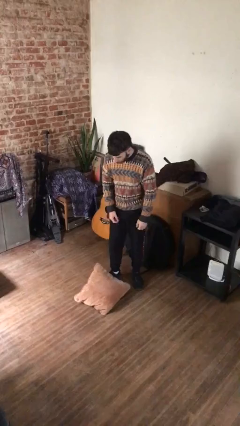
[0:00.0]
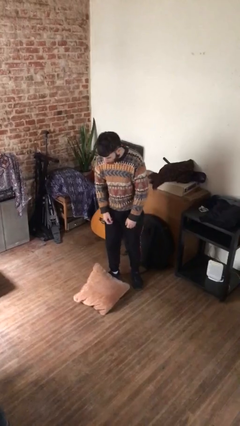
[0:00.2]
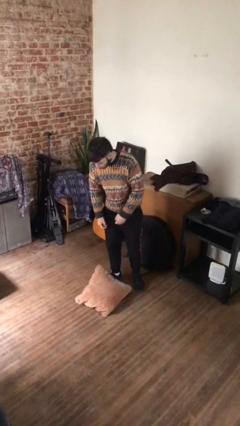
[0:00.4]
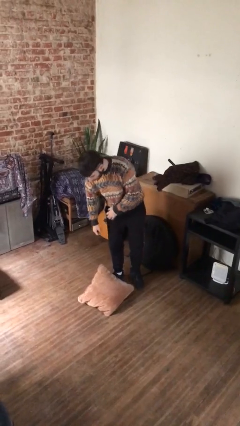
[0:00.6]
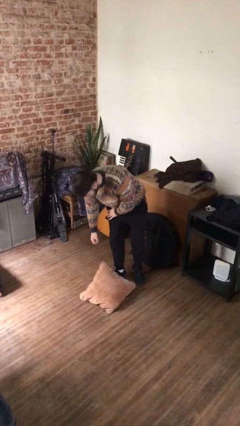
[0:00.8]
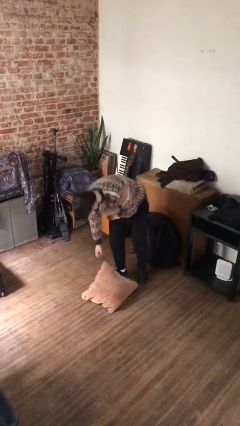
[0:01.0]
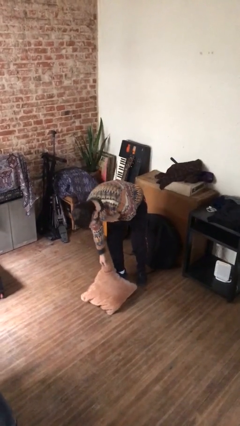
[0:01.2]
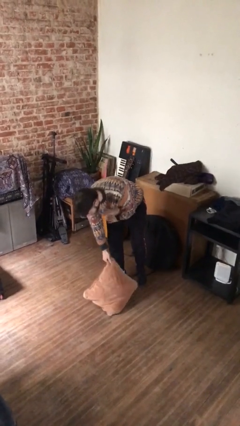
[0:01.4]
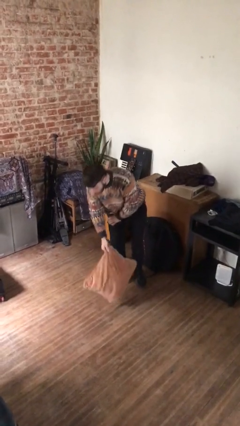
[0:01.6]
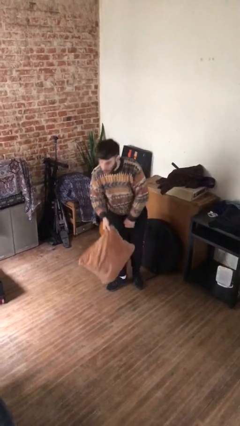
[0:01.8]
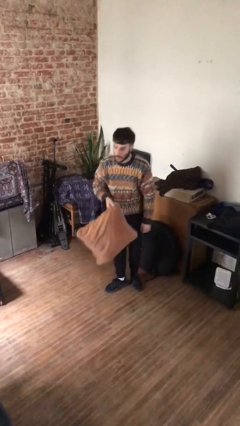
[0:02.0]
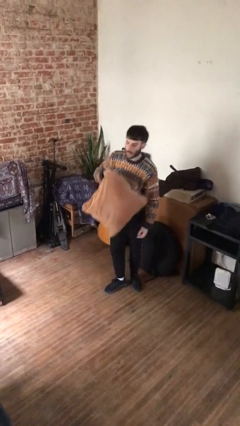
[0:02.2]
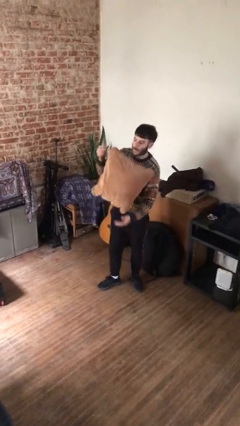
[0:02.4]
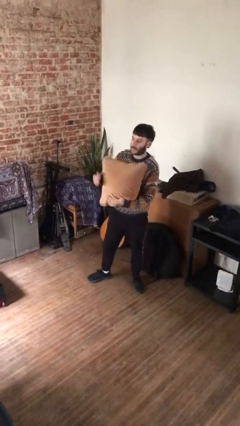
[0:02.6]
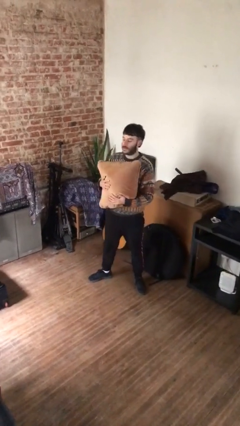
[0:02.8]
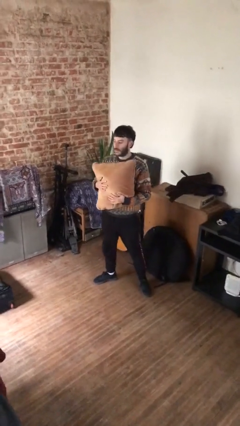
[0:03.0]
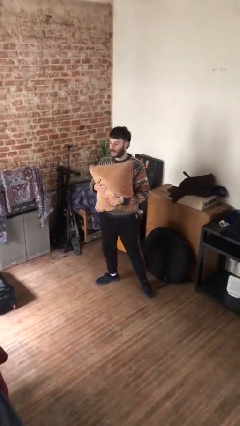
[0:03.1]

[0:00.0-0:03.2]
person picks up object from floor

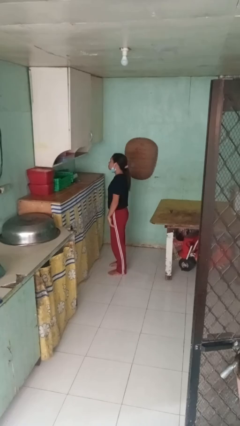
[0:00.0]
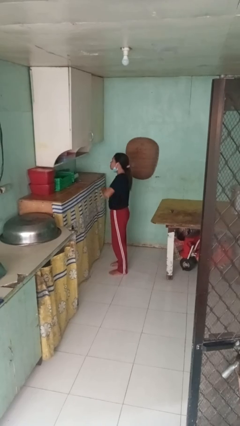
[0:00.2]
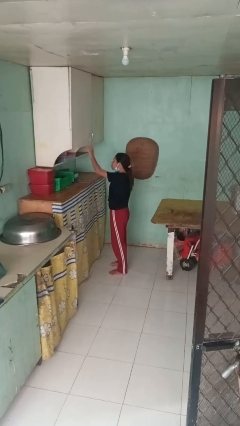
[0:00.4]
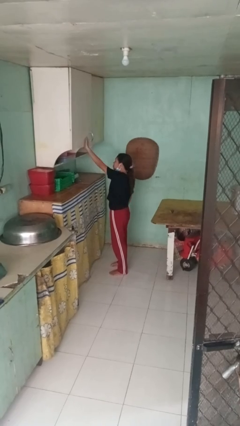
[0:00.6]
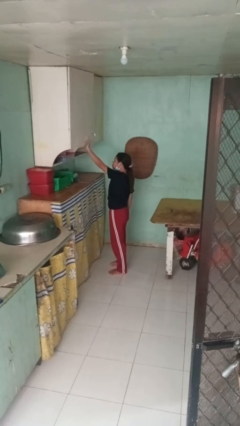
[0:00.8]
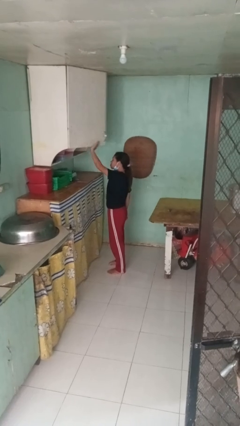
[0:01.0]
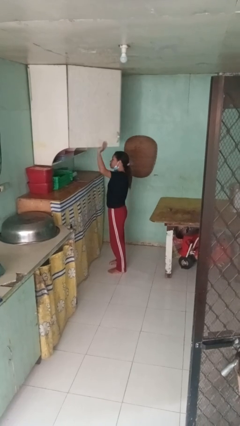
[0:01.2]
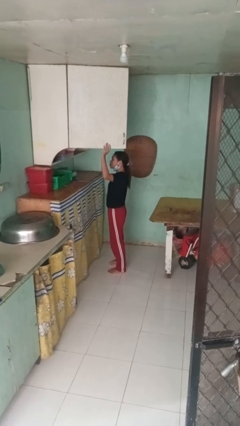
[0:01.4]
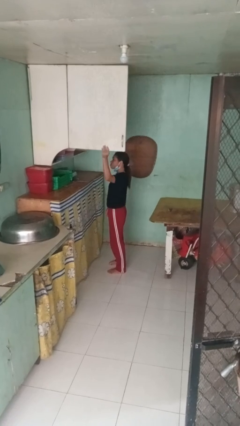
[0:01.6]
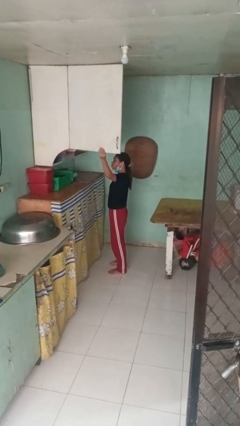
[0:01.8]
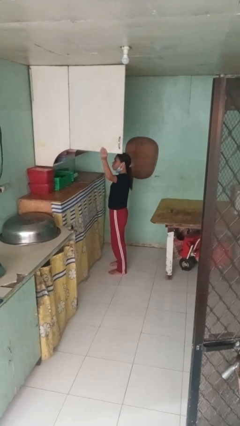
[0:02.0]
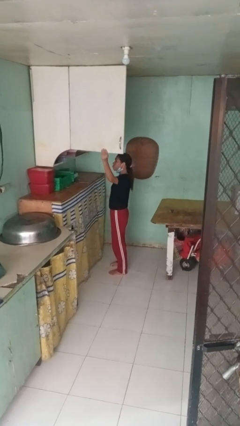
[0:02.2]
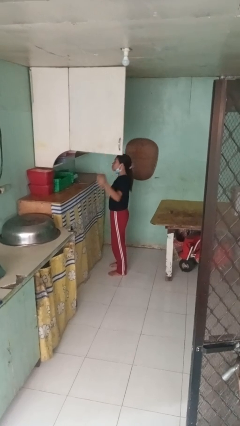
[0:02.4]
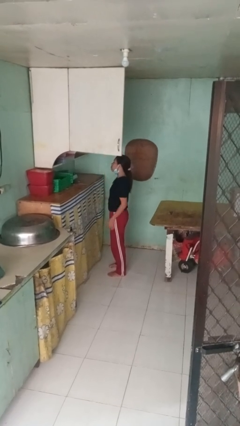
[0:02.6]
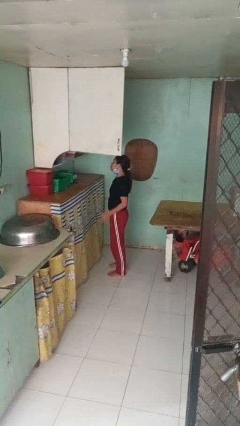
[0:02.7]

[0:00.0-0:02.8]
person opens cabinet

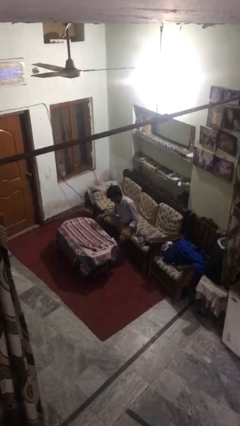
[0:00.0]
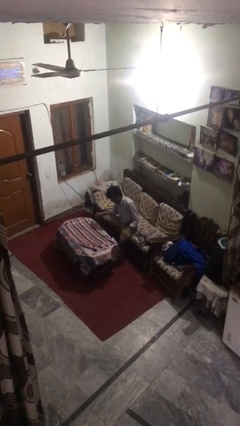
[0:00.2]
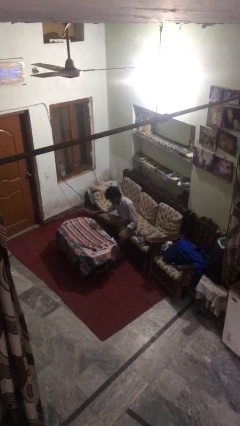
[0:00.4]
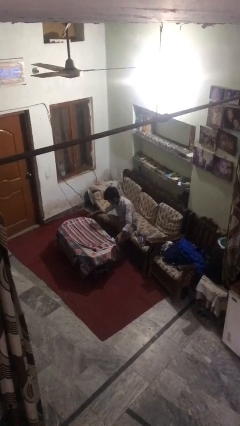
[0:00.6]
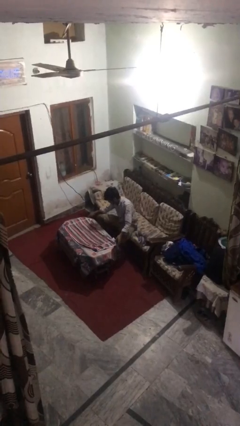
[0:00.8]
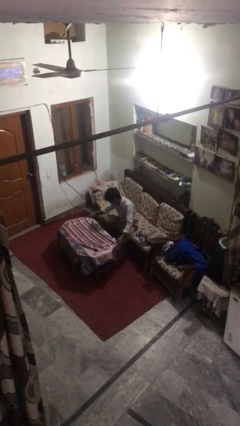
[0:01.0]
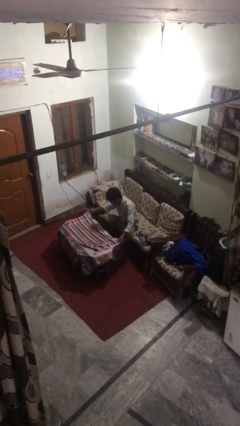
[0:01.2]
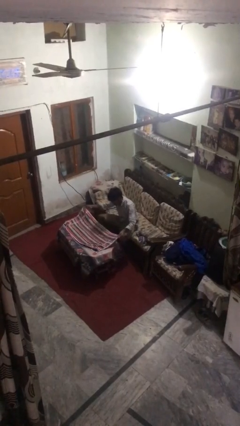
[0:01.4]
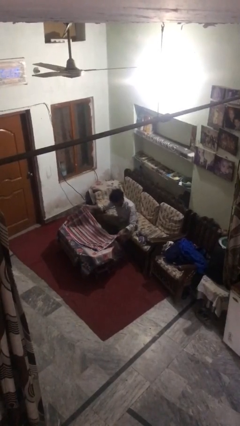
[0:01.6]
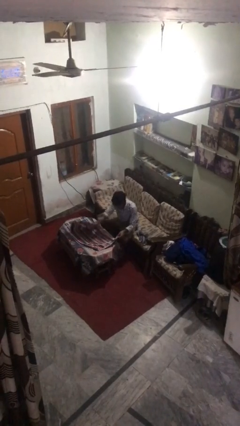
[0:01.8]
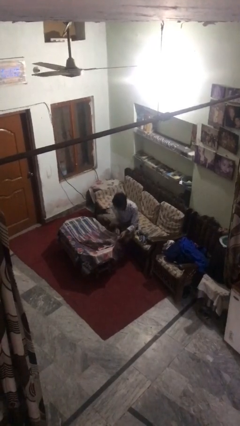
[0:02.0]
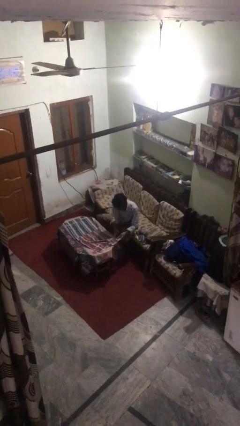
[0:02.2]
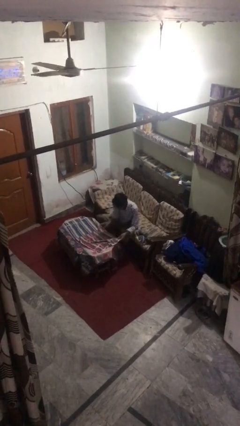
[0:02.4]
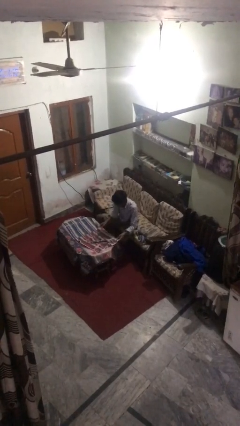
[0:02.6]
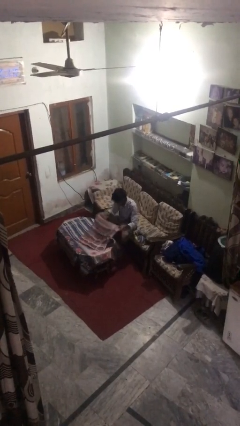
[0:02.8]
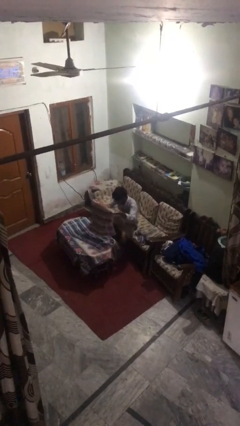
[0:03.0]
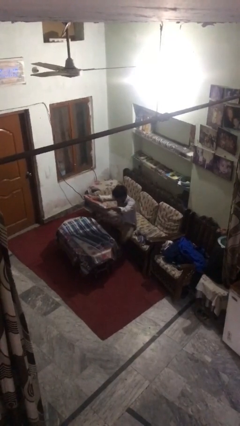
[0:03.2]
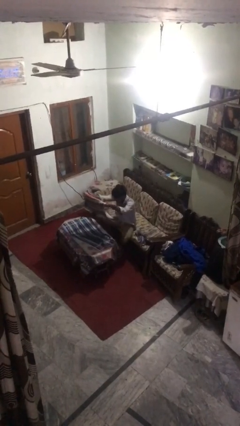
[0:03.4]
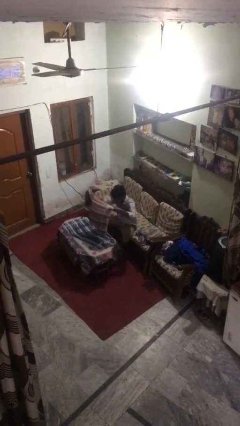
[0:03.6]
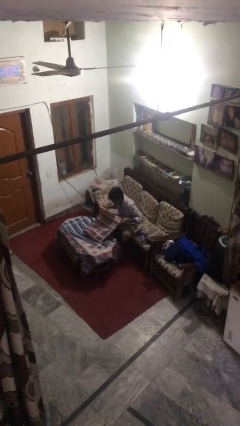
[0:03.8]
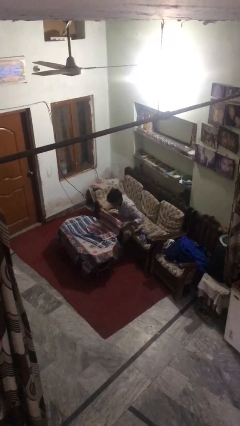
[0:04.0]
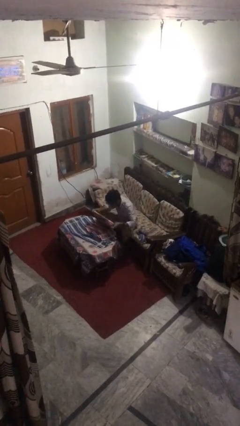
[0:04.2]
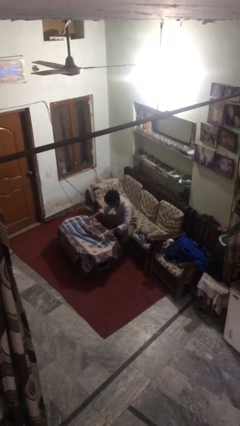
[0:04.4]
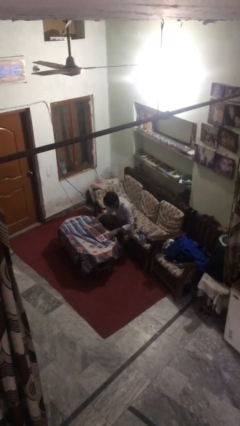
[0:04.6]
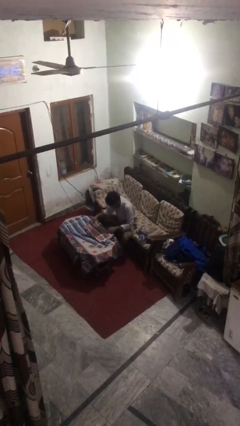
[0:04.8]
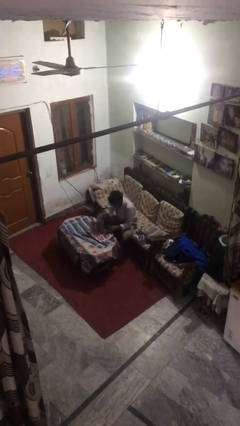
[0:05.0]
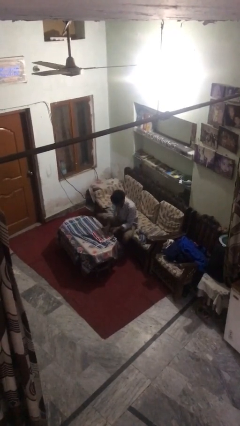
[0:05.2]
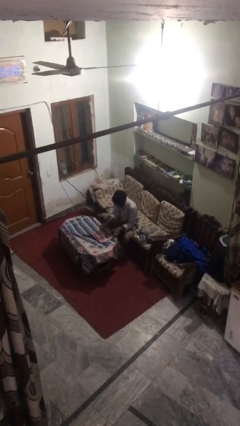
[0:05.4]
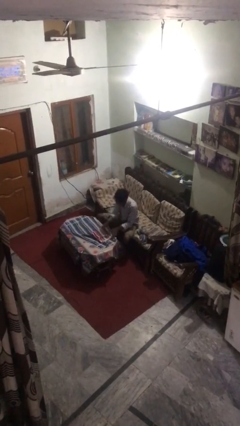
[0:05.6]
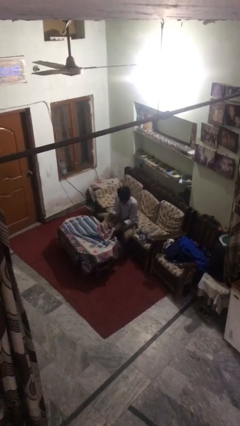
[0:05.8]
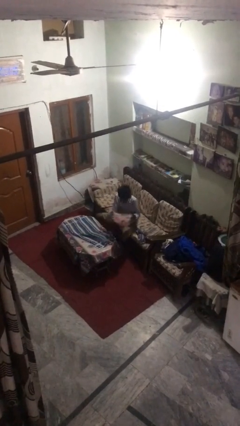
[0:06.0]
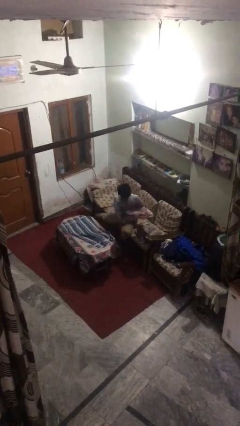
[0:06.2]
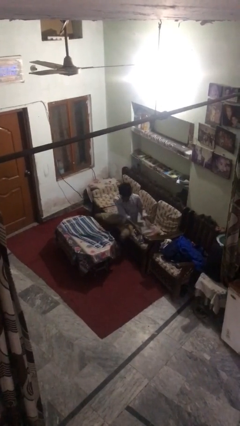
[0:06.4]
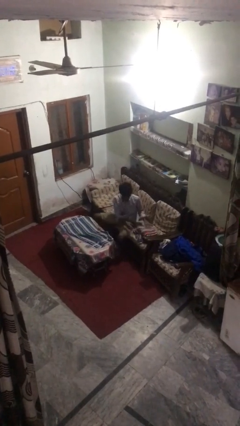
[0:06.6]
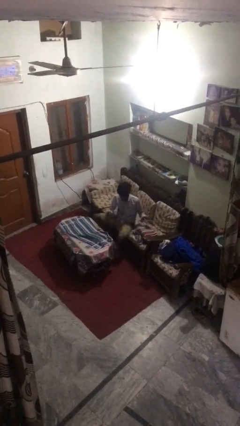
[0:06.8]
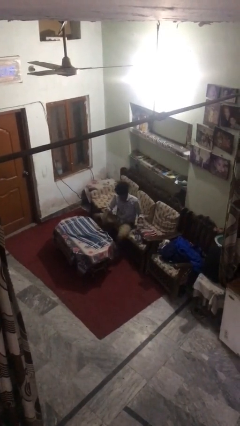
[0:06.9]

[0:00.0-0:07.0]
person folds towel

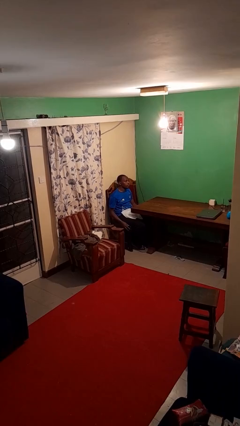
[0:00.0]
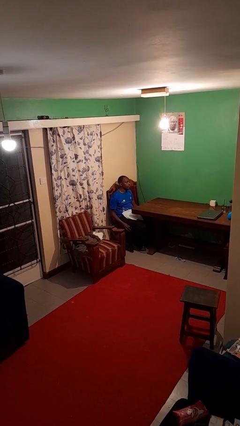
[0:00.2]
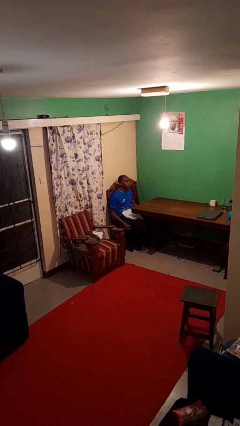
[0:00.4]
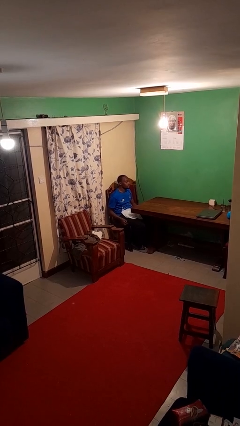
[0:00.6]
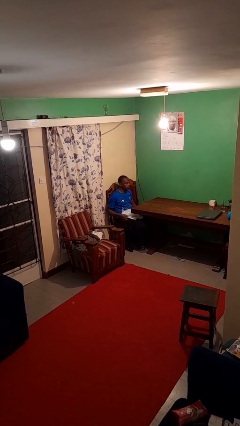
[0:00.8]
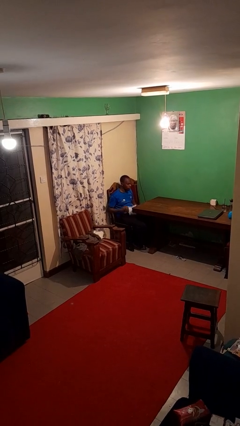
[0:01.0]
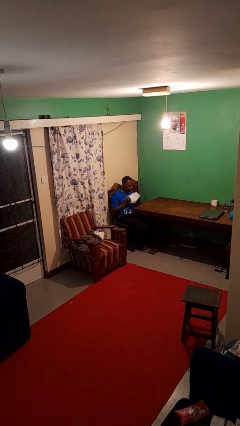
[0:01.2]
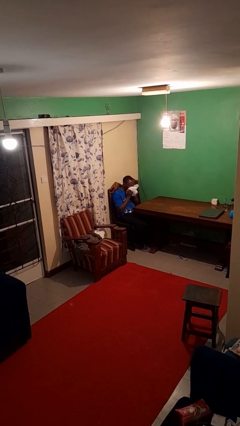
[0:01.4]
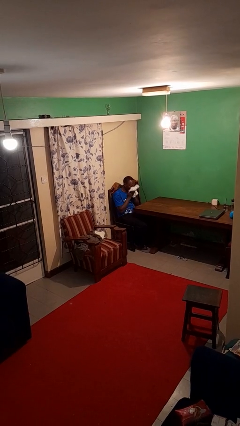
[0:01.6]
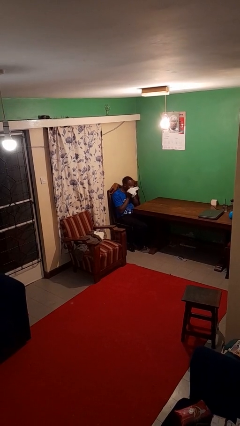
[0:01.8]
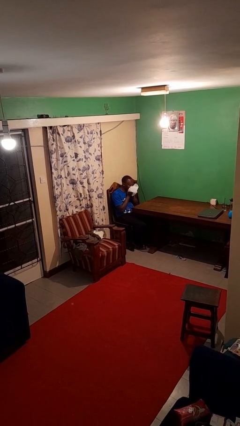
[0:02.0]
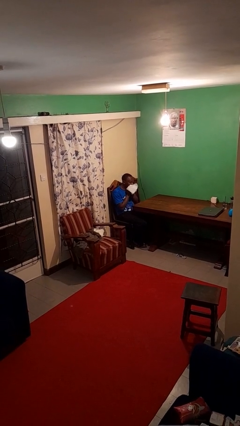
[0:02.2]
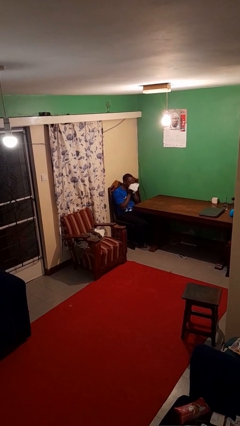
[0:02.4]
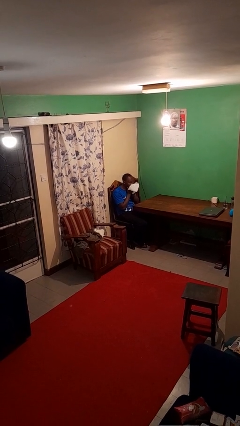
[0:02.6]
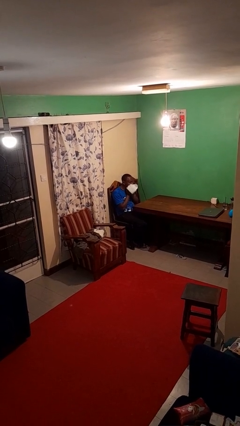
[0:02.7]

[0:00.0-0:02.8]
person wipes mouth with napkin

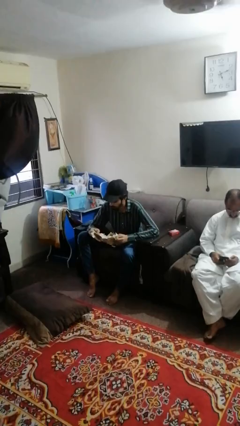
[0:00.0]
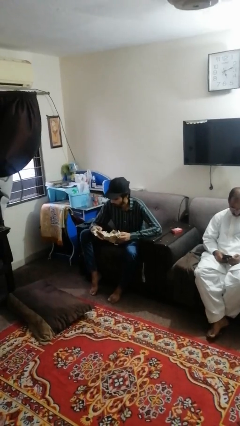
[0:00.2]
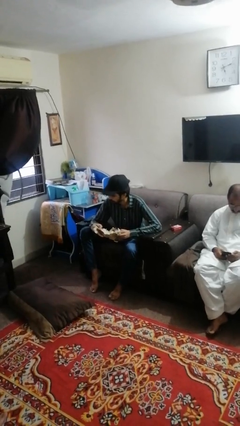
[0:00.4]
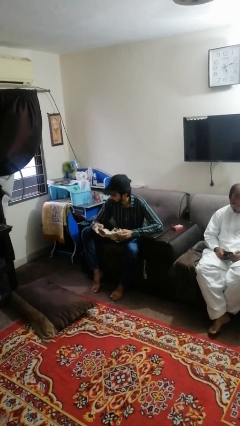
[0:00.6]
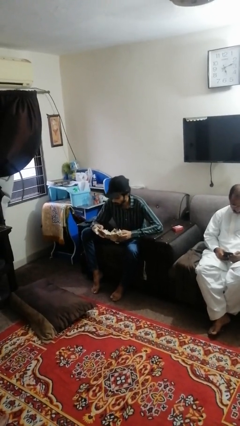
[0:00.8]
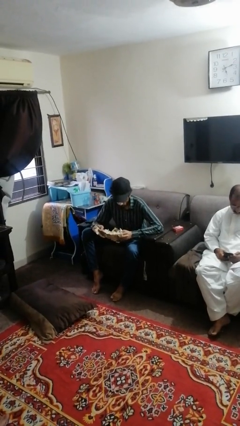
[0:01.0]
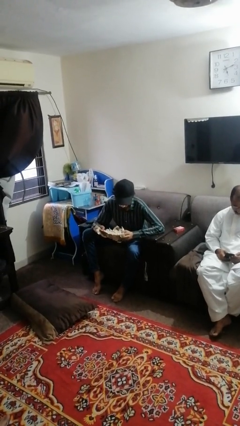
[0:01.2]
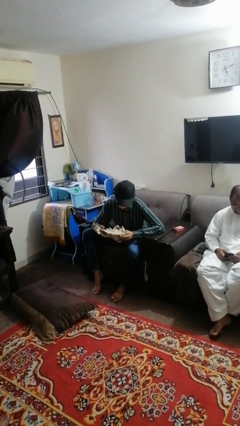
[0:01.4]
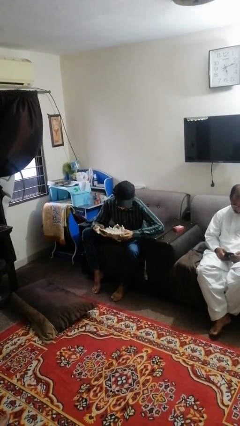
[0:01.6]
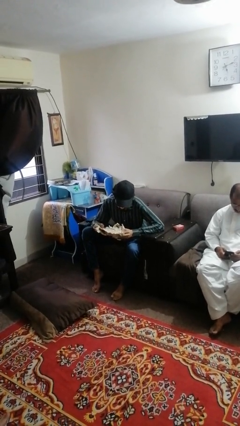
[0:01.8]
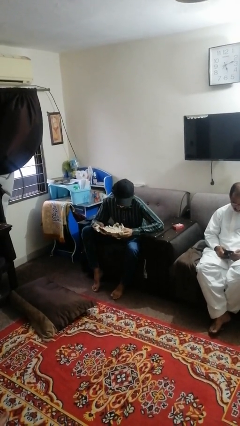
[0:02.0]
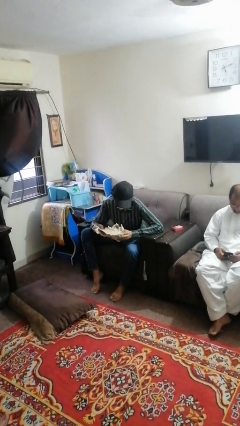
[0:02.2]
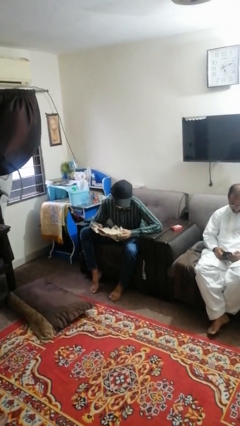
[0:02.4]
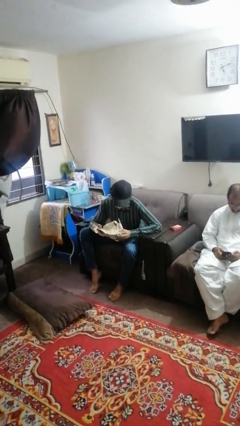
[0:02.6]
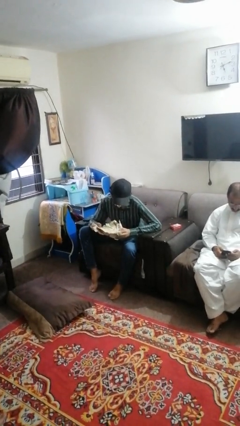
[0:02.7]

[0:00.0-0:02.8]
person reads newspaper
